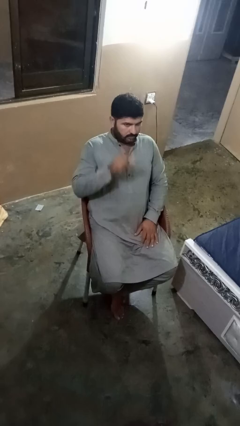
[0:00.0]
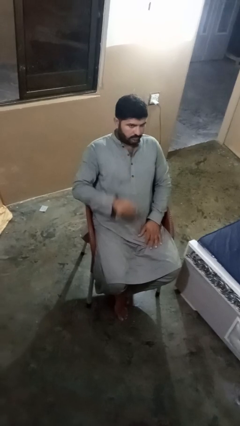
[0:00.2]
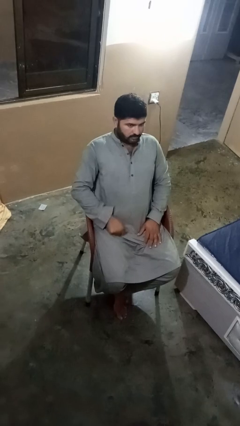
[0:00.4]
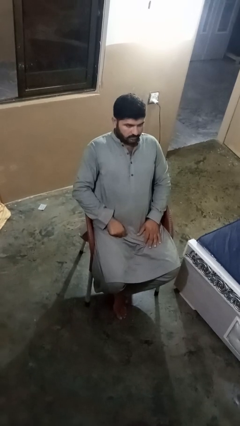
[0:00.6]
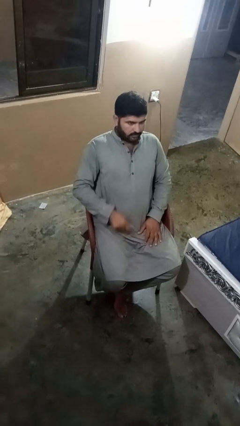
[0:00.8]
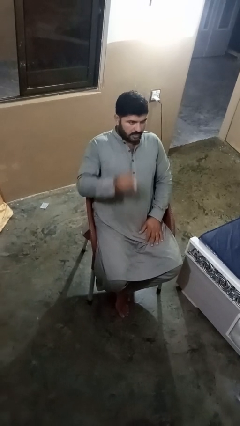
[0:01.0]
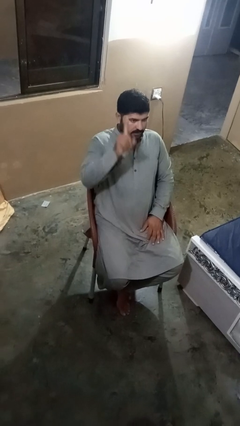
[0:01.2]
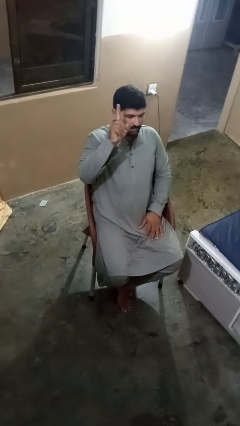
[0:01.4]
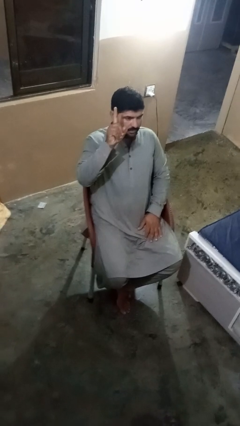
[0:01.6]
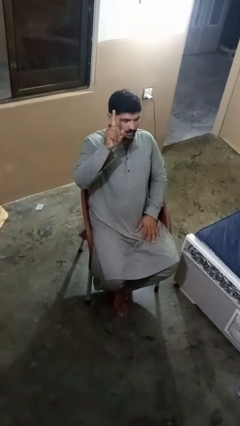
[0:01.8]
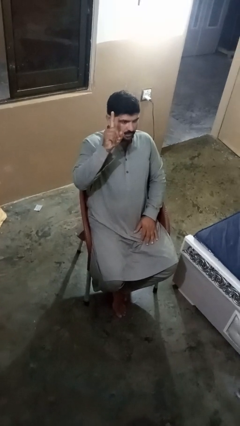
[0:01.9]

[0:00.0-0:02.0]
person gestures number one

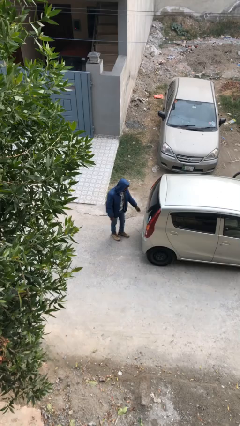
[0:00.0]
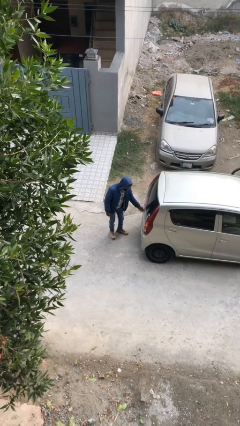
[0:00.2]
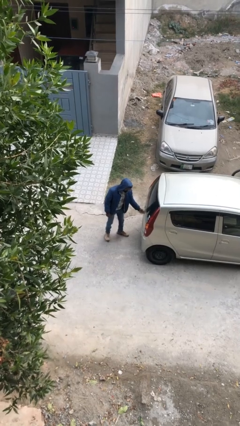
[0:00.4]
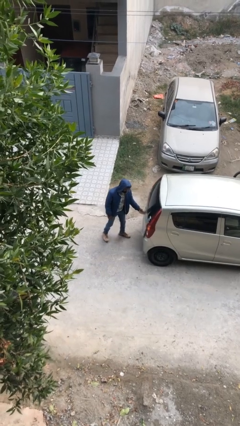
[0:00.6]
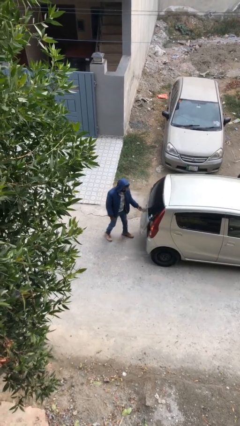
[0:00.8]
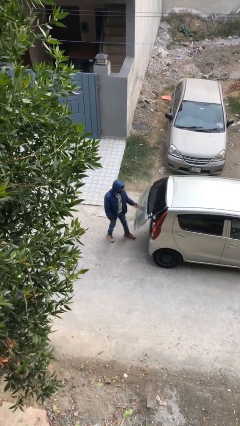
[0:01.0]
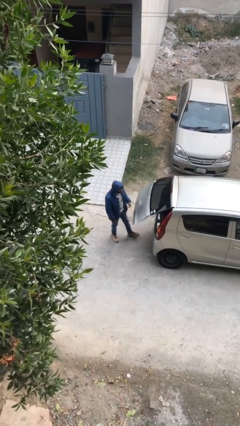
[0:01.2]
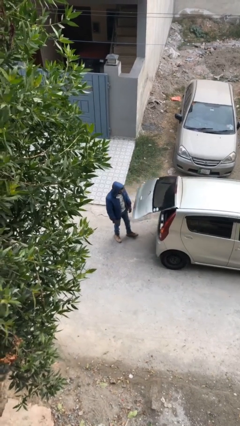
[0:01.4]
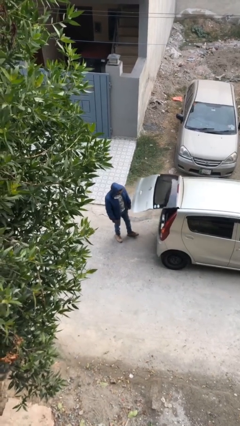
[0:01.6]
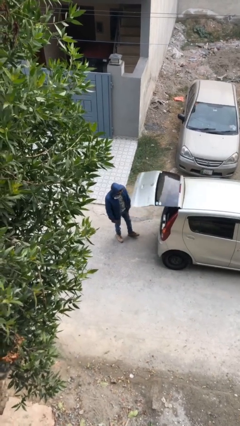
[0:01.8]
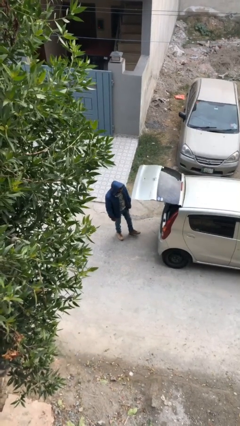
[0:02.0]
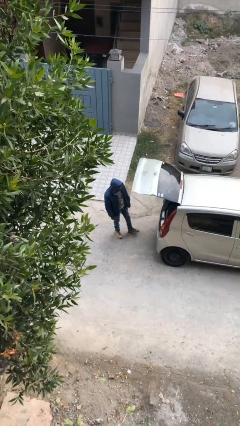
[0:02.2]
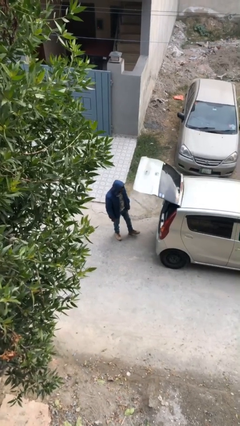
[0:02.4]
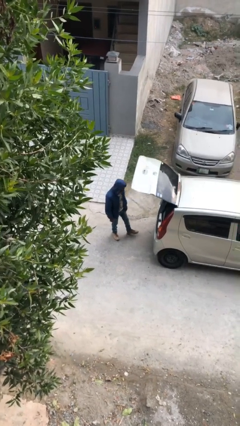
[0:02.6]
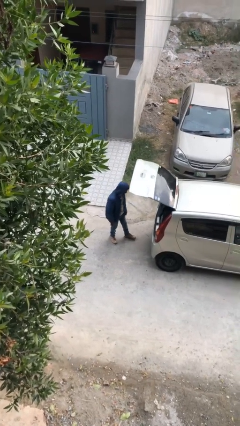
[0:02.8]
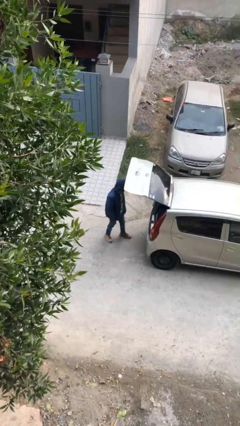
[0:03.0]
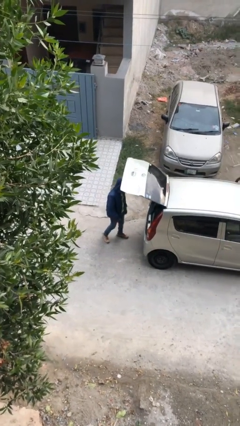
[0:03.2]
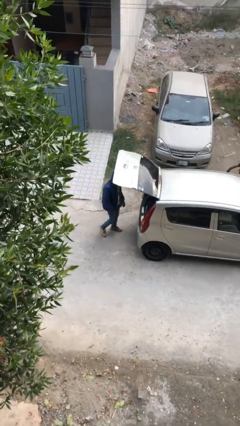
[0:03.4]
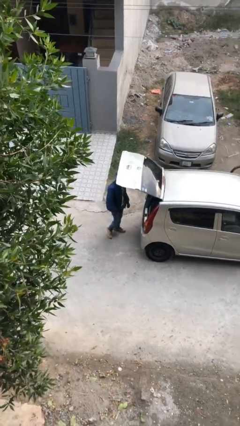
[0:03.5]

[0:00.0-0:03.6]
person opens car trunk

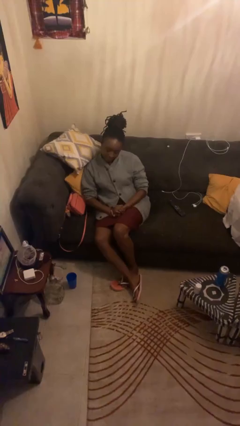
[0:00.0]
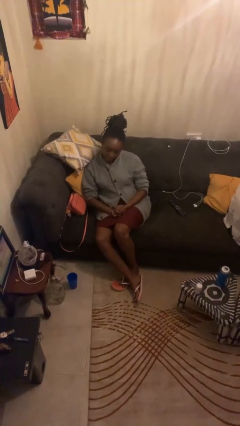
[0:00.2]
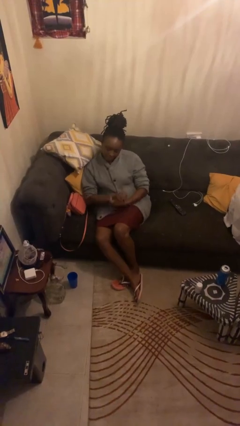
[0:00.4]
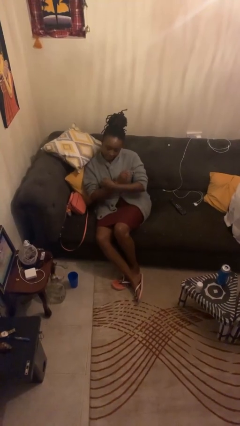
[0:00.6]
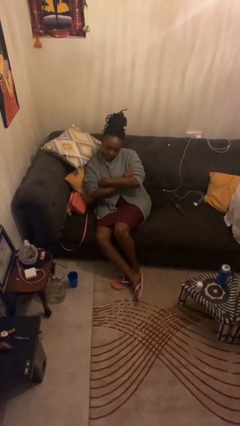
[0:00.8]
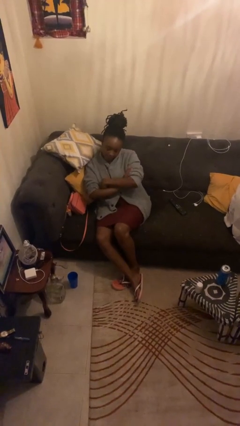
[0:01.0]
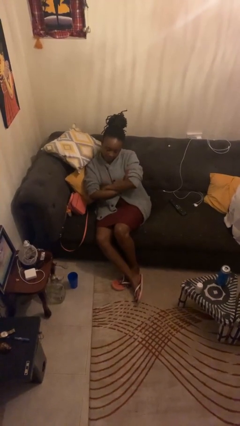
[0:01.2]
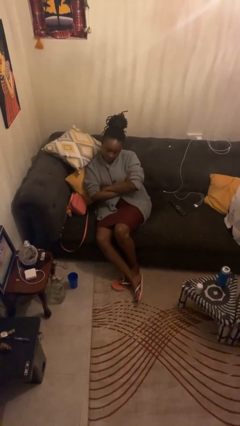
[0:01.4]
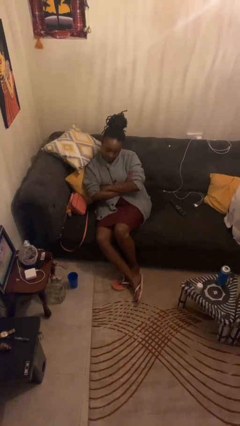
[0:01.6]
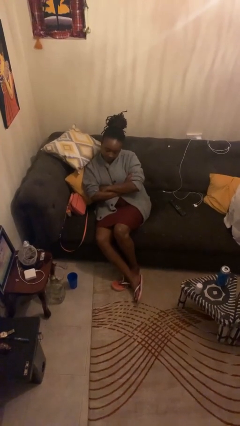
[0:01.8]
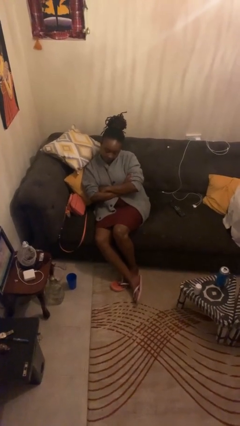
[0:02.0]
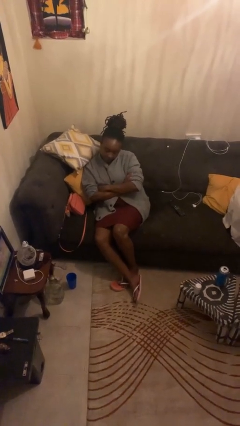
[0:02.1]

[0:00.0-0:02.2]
person crosses arms

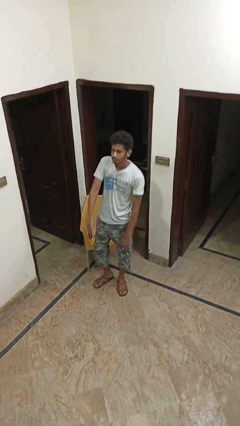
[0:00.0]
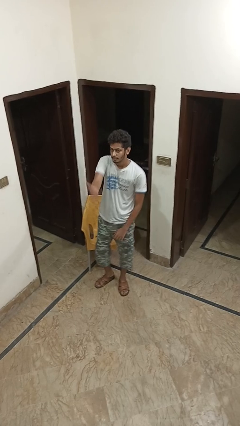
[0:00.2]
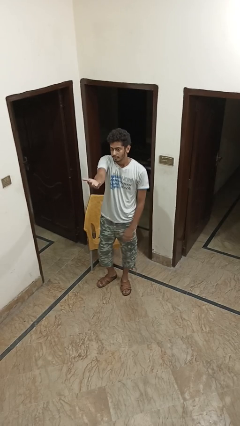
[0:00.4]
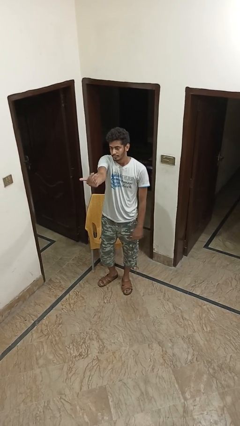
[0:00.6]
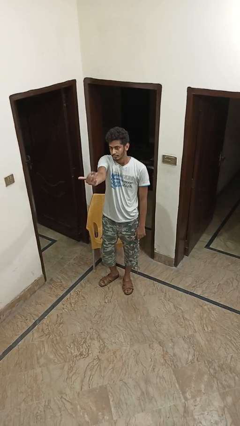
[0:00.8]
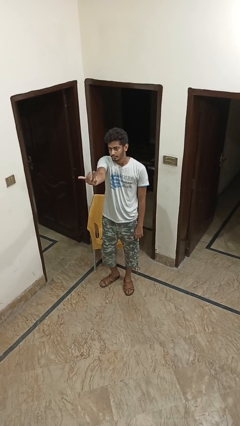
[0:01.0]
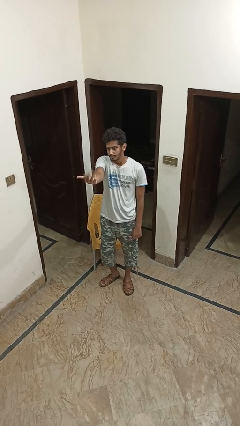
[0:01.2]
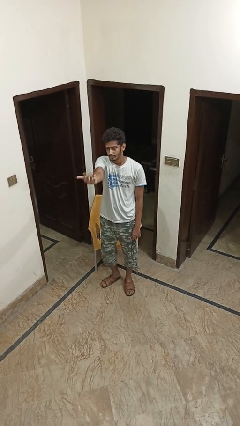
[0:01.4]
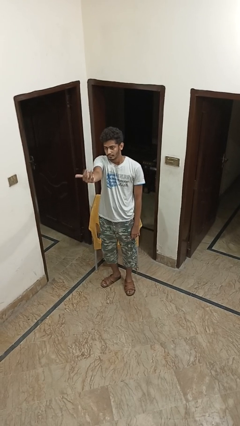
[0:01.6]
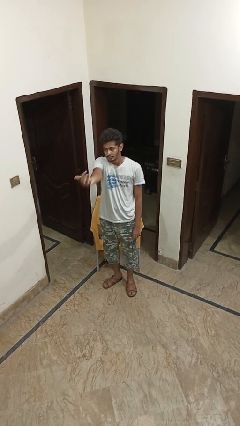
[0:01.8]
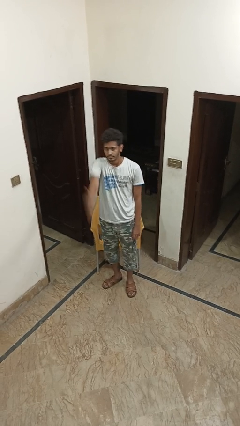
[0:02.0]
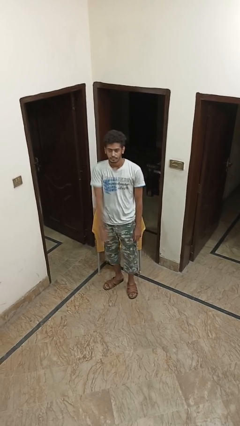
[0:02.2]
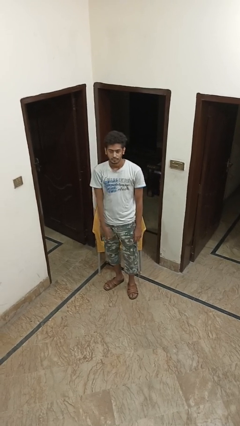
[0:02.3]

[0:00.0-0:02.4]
person gestures come here

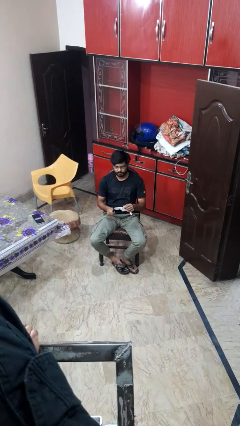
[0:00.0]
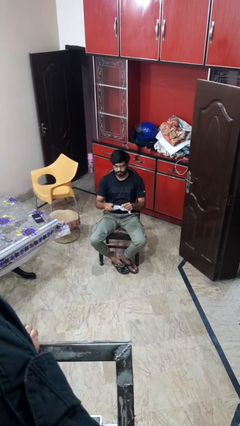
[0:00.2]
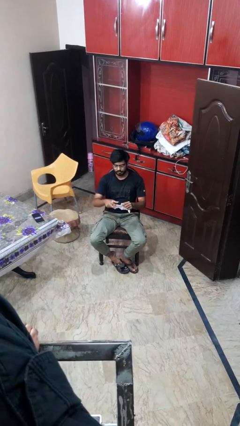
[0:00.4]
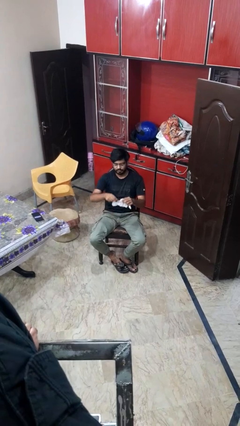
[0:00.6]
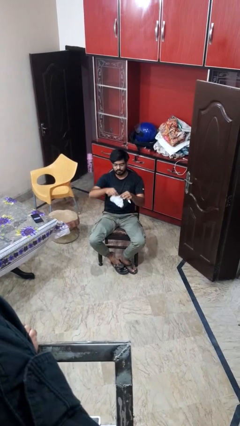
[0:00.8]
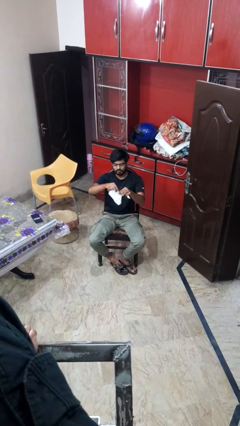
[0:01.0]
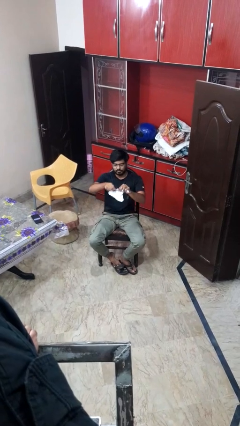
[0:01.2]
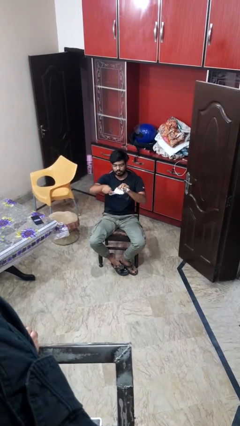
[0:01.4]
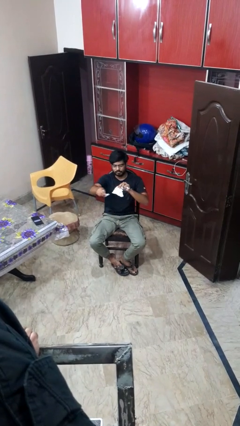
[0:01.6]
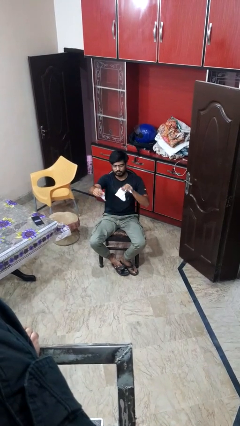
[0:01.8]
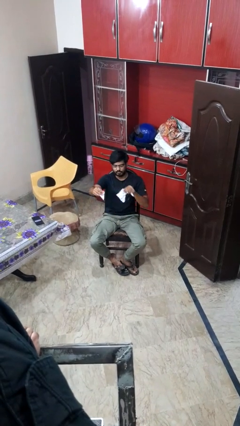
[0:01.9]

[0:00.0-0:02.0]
person tears paper

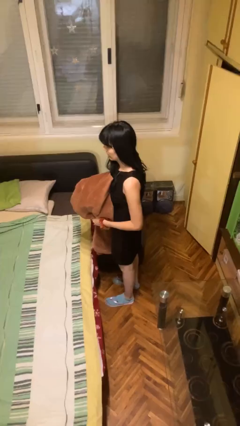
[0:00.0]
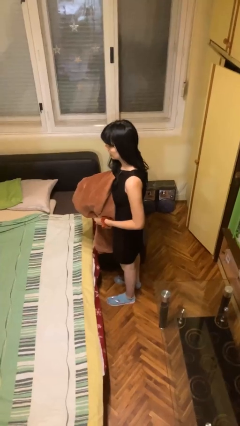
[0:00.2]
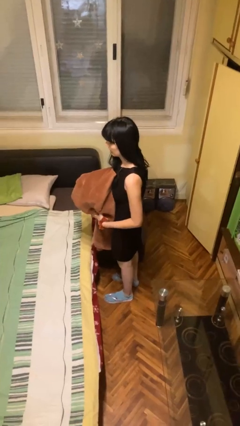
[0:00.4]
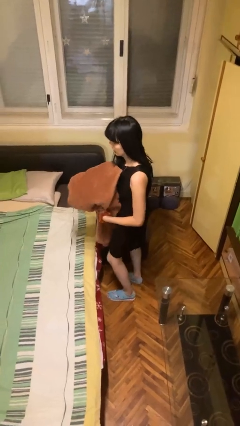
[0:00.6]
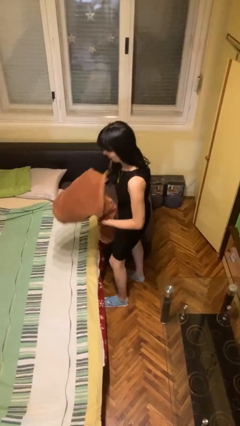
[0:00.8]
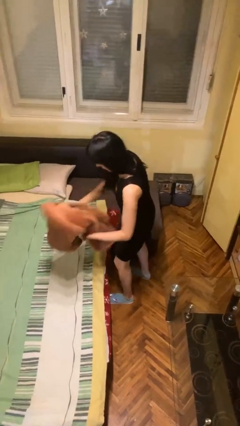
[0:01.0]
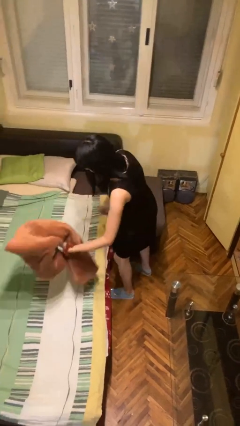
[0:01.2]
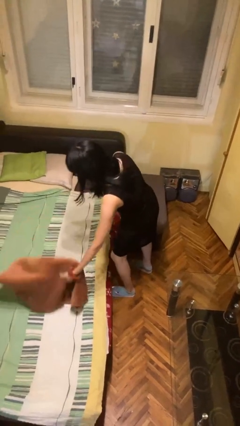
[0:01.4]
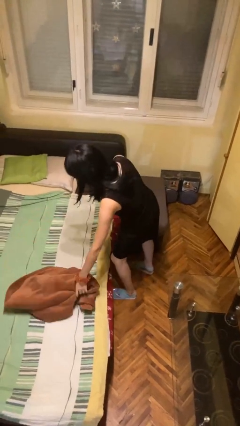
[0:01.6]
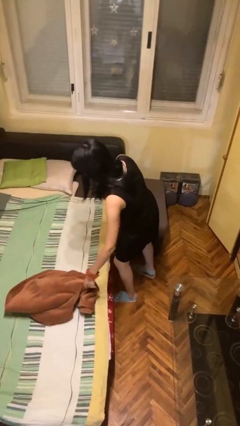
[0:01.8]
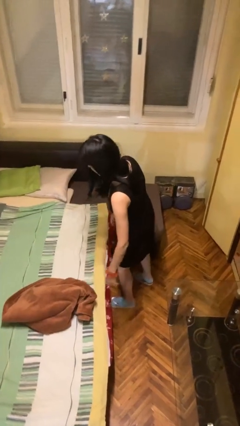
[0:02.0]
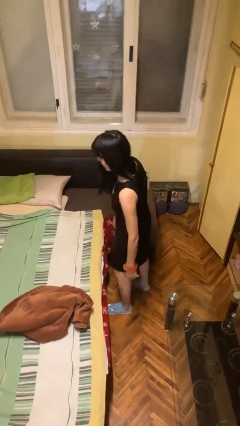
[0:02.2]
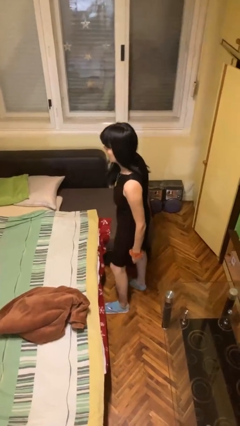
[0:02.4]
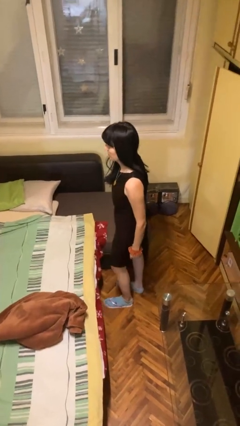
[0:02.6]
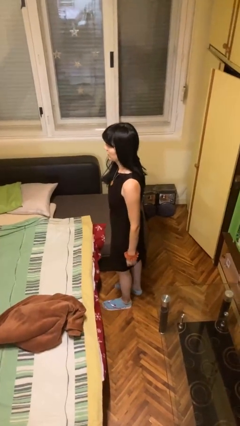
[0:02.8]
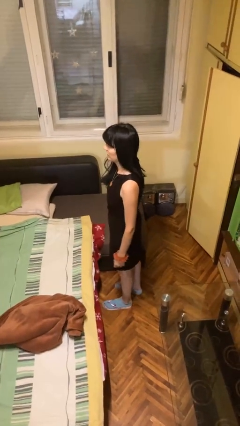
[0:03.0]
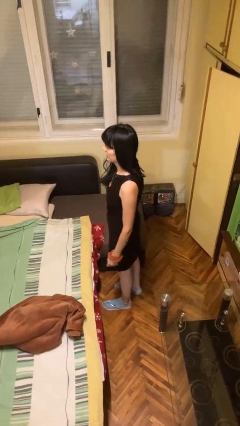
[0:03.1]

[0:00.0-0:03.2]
person puts down object on bed

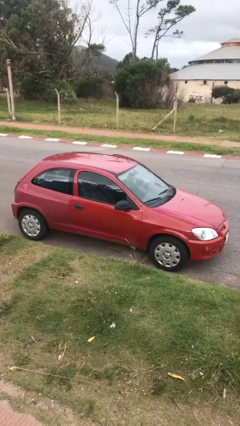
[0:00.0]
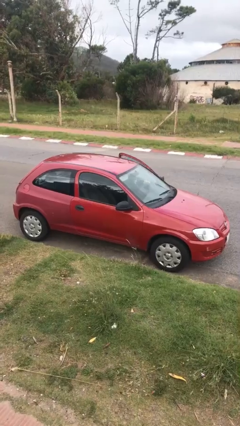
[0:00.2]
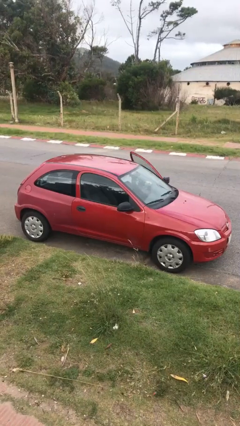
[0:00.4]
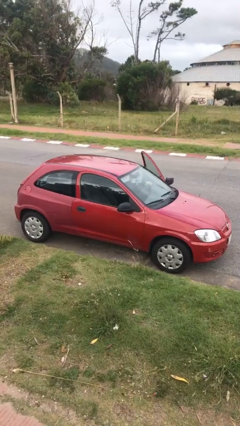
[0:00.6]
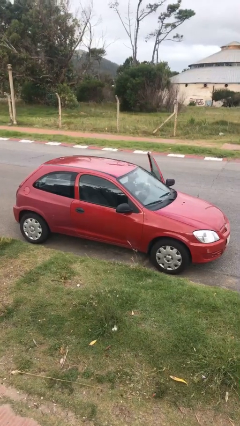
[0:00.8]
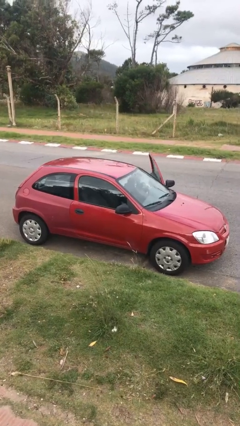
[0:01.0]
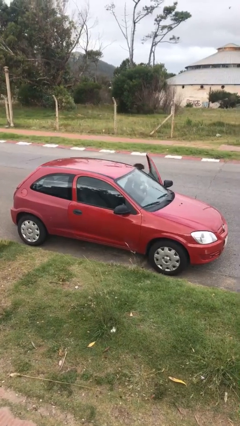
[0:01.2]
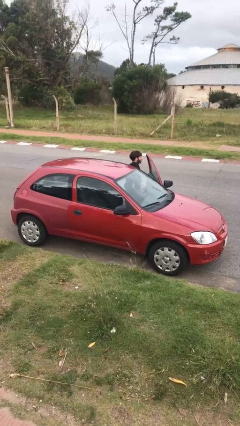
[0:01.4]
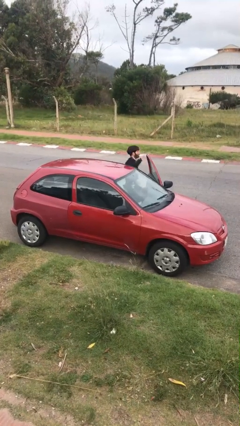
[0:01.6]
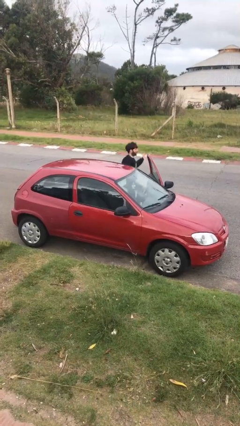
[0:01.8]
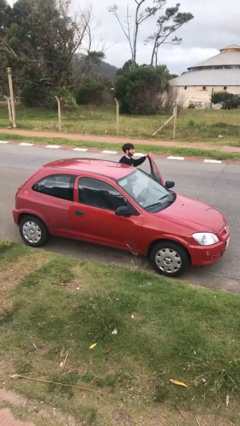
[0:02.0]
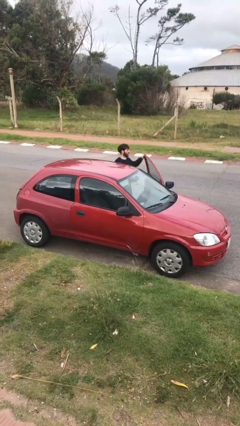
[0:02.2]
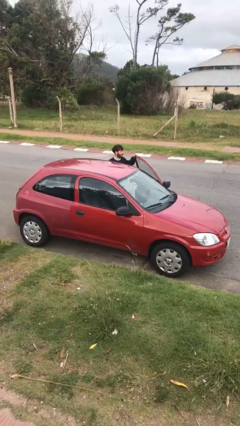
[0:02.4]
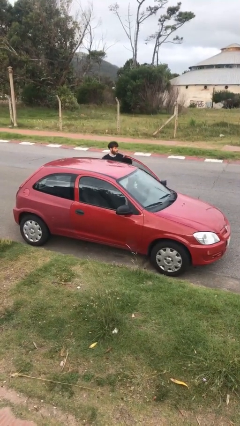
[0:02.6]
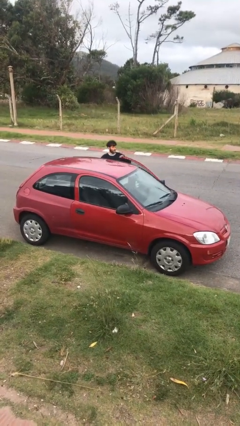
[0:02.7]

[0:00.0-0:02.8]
car drops off person
